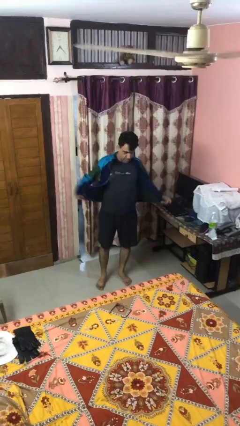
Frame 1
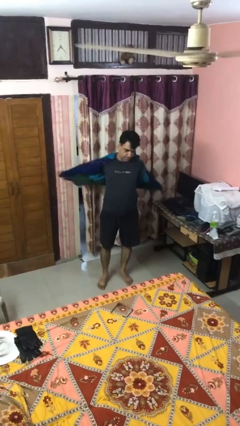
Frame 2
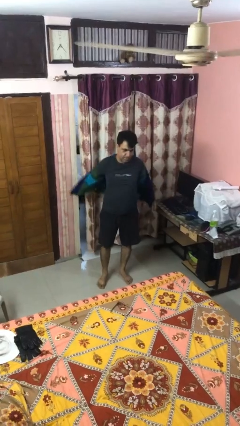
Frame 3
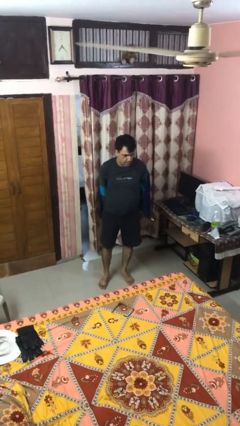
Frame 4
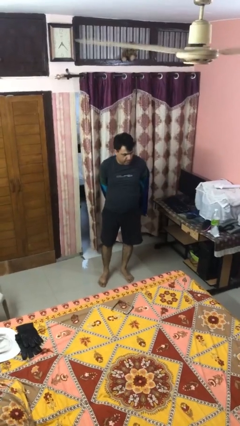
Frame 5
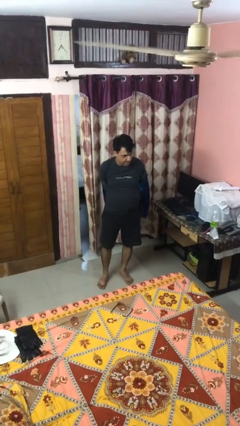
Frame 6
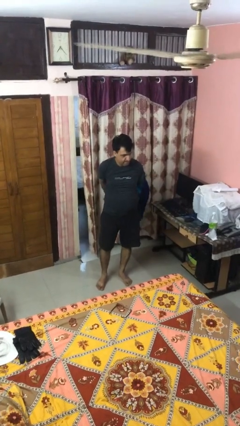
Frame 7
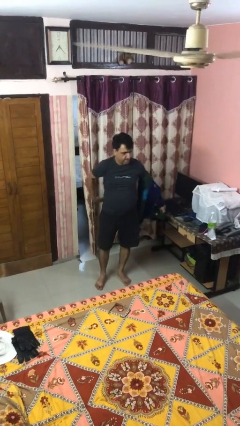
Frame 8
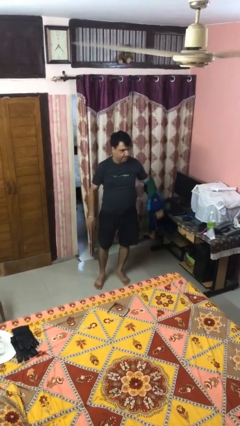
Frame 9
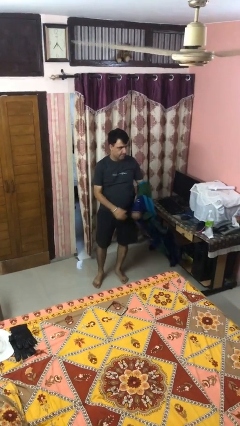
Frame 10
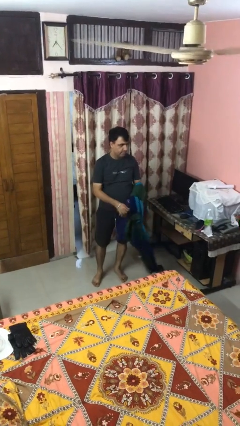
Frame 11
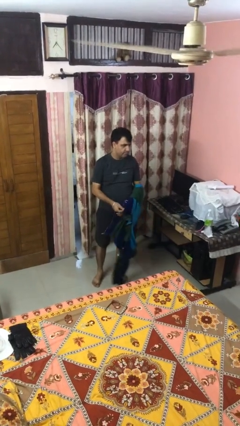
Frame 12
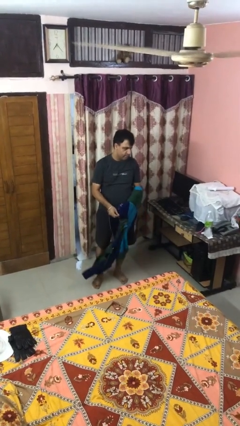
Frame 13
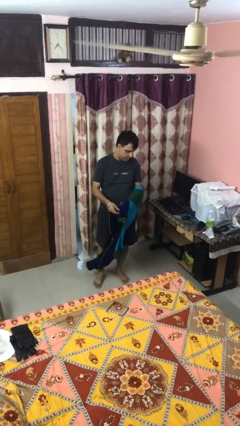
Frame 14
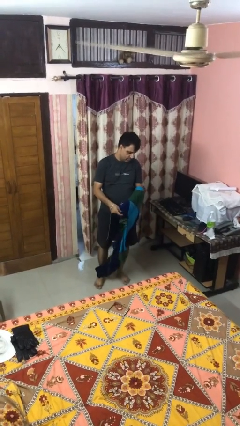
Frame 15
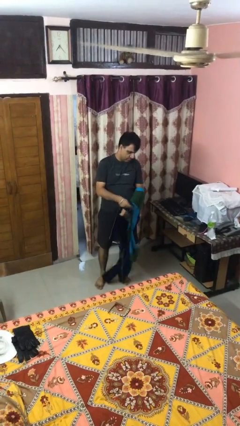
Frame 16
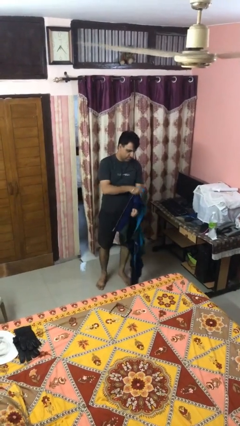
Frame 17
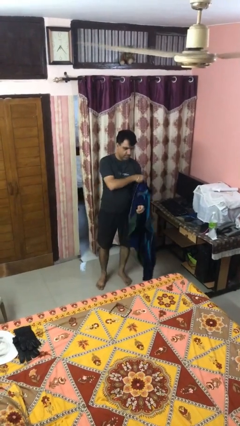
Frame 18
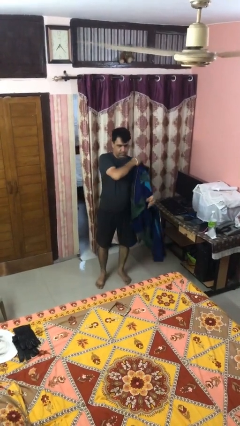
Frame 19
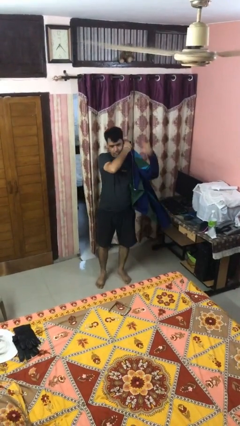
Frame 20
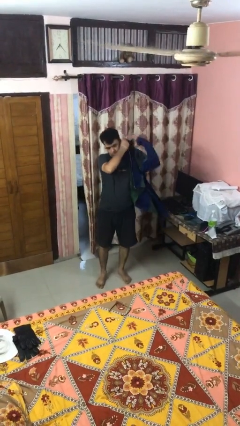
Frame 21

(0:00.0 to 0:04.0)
person takes off jacket

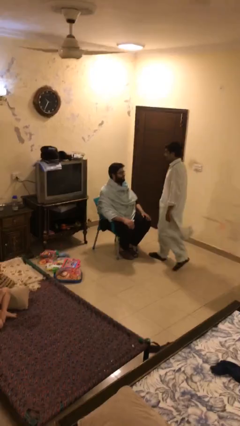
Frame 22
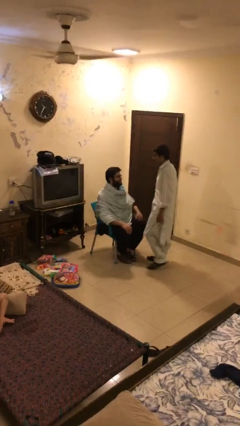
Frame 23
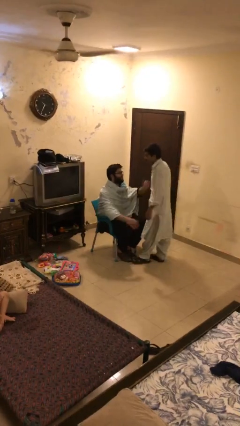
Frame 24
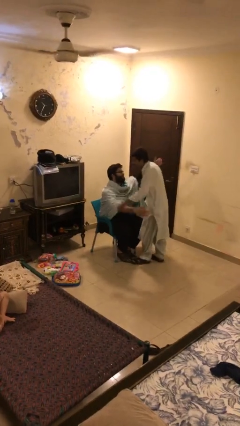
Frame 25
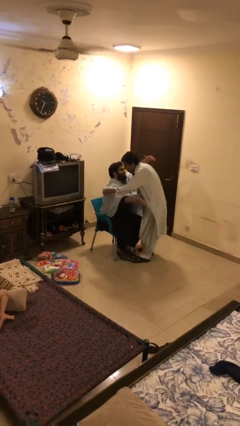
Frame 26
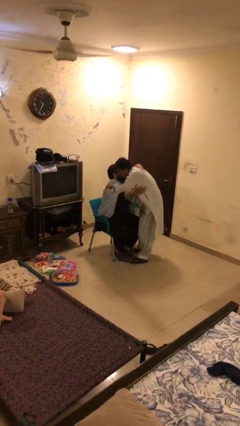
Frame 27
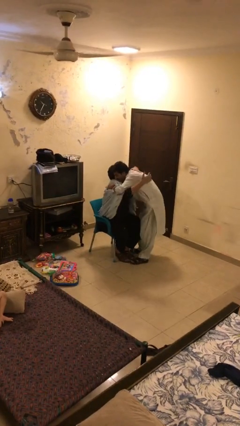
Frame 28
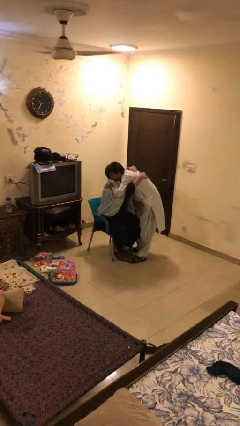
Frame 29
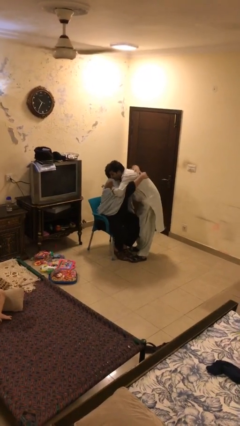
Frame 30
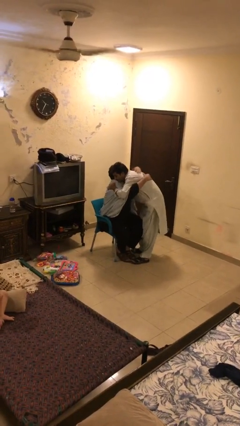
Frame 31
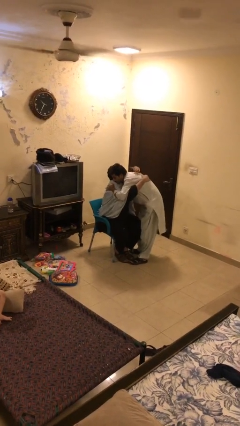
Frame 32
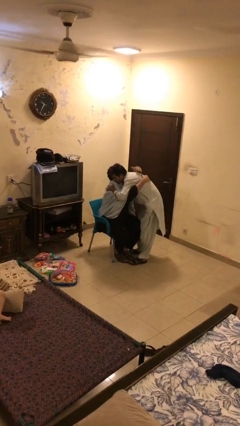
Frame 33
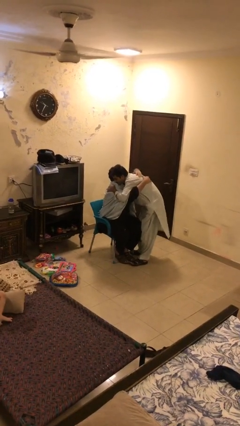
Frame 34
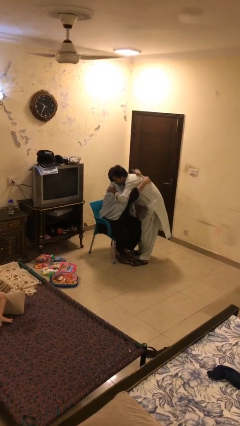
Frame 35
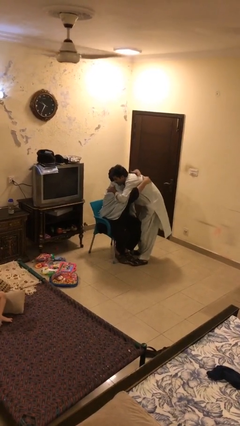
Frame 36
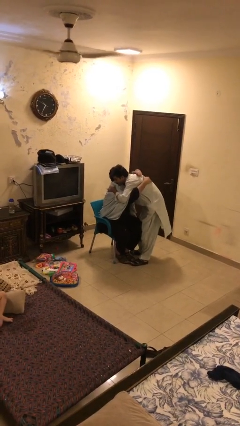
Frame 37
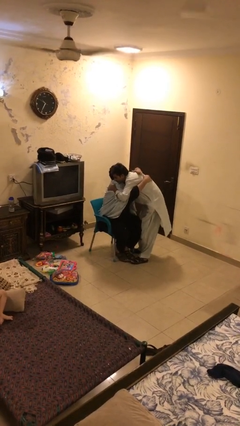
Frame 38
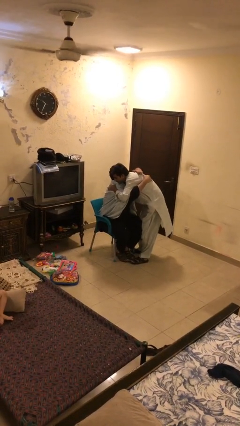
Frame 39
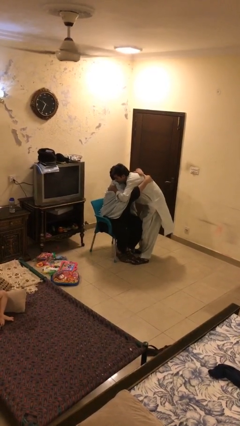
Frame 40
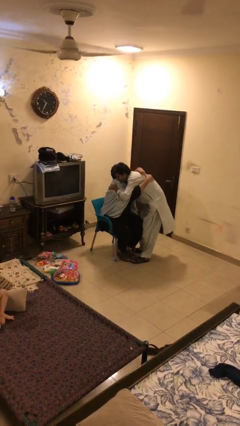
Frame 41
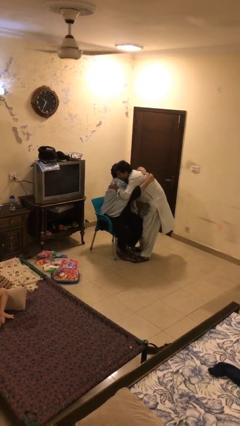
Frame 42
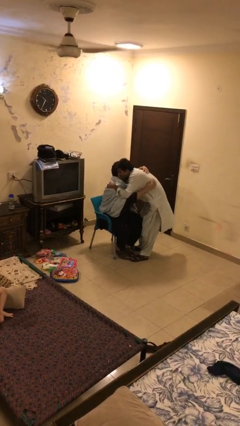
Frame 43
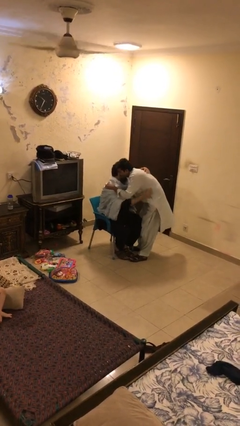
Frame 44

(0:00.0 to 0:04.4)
person embraces person

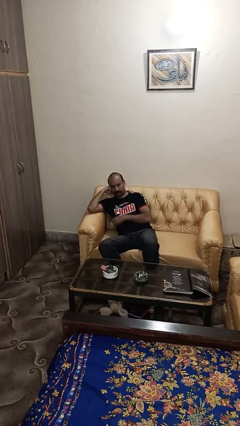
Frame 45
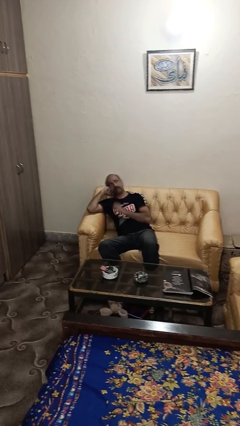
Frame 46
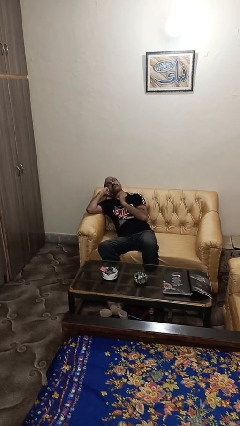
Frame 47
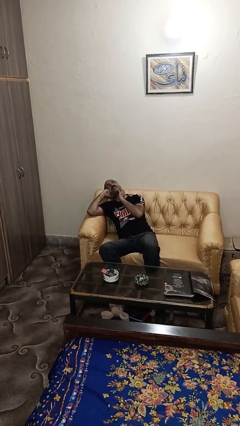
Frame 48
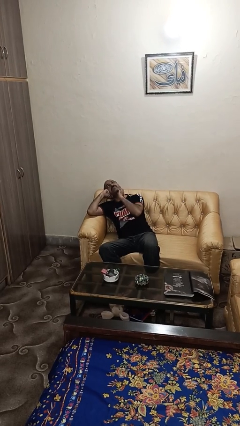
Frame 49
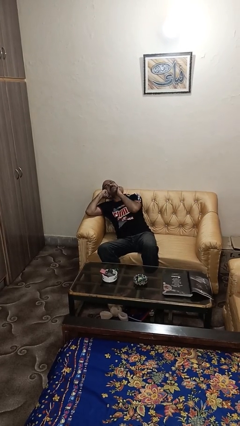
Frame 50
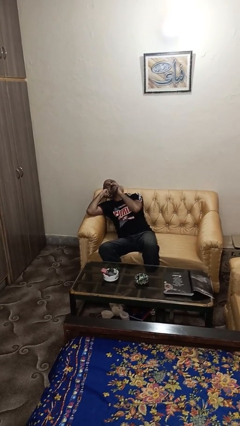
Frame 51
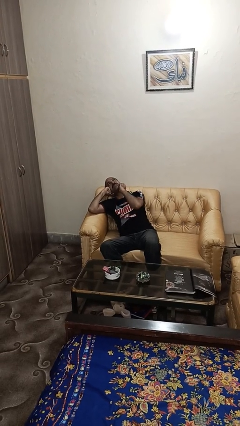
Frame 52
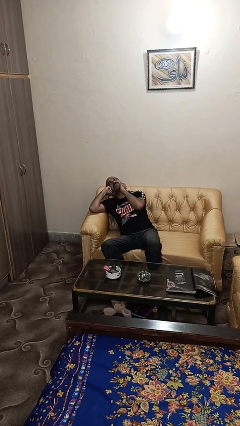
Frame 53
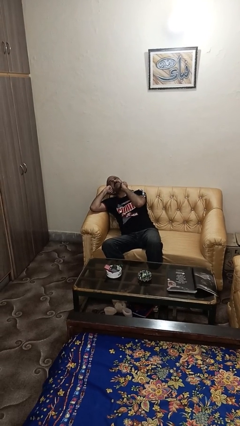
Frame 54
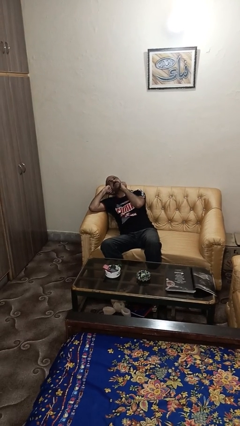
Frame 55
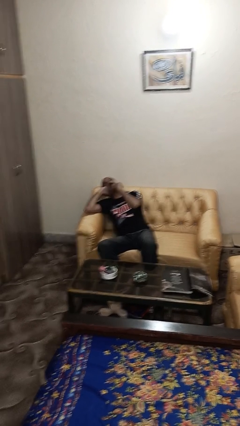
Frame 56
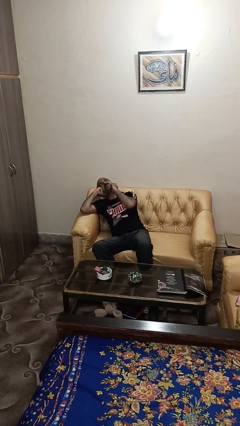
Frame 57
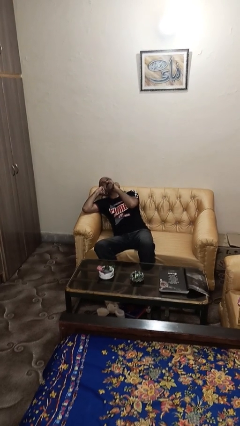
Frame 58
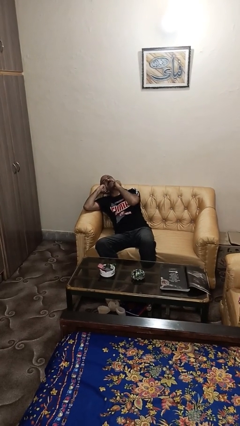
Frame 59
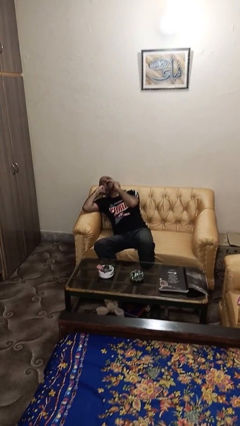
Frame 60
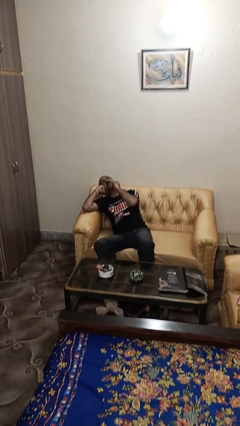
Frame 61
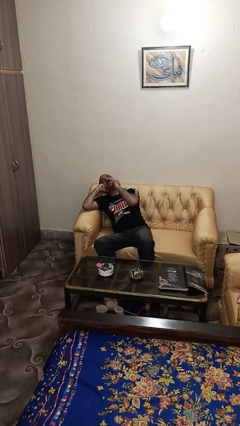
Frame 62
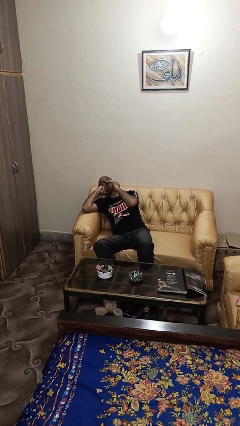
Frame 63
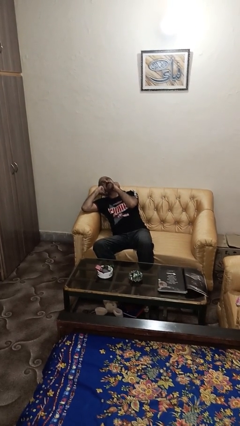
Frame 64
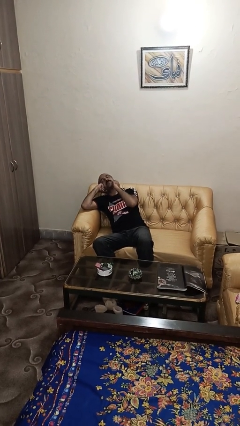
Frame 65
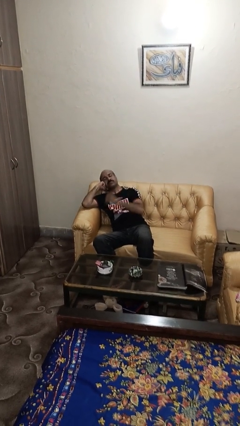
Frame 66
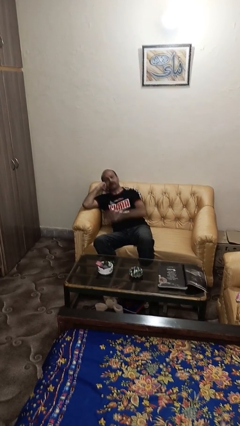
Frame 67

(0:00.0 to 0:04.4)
person strokes chin

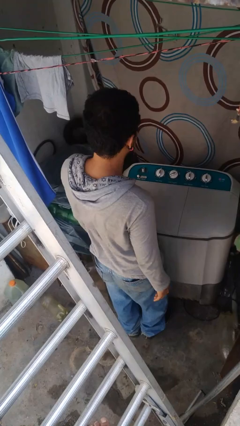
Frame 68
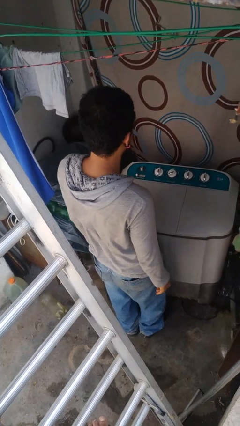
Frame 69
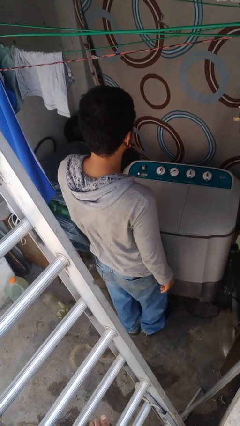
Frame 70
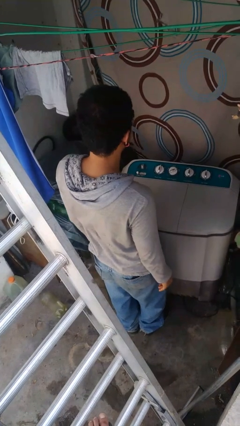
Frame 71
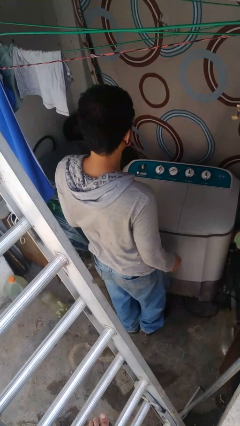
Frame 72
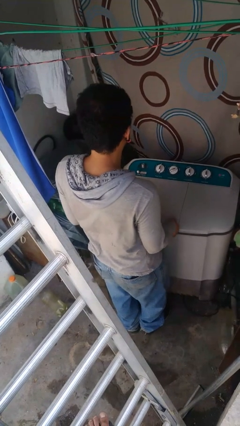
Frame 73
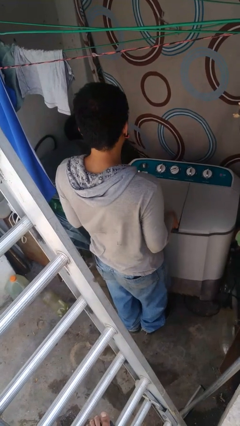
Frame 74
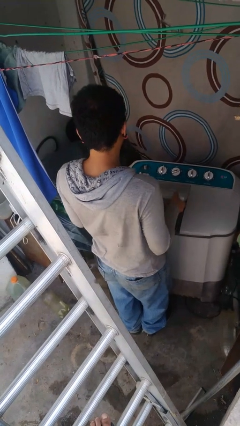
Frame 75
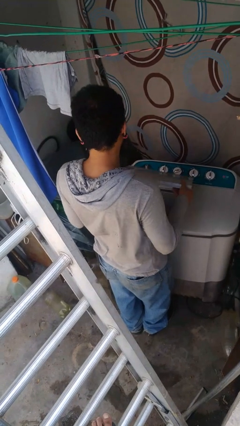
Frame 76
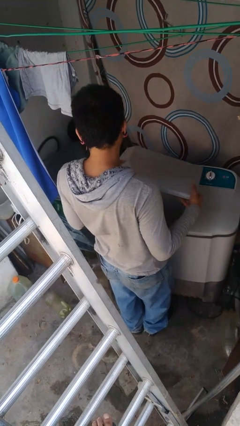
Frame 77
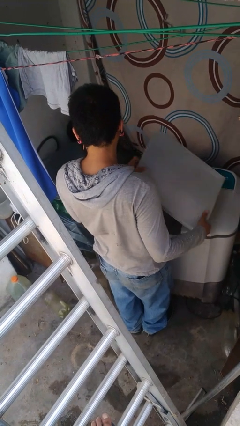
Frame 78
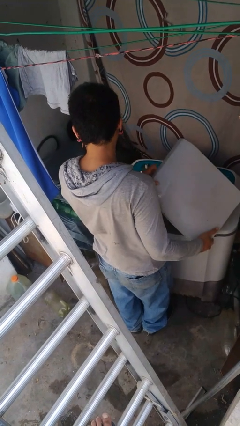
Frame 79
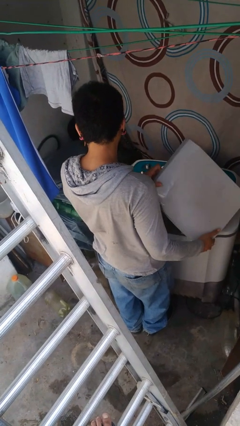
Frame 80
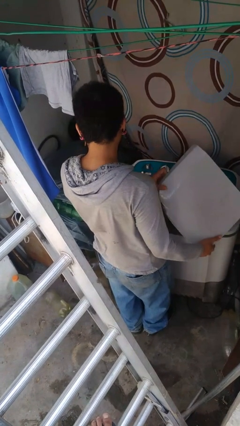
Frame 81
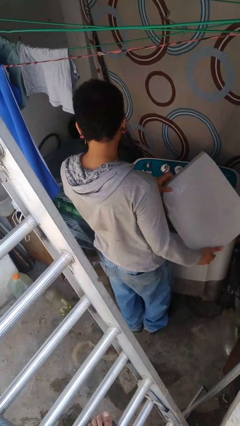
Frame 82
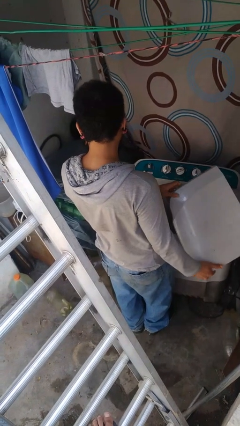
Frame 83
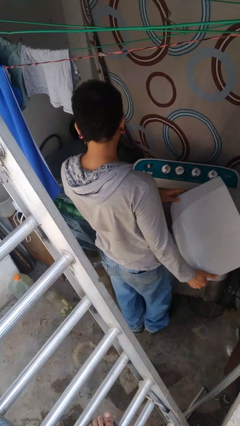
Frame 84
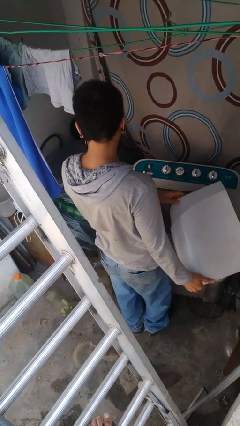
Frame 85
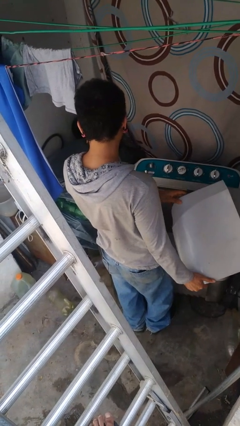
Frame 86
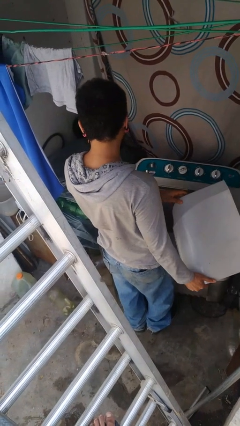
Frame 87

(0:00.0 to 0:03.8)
person opens clothes washer

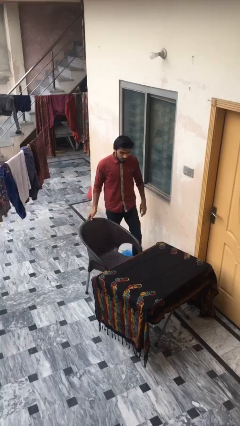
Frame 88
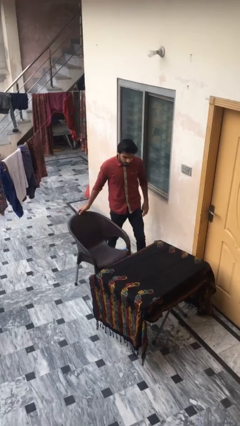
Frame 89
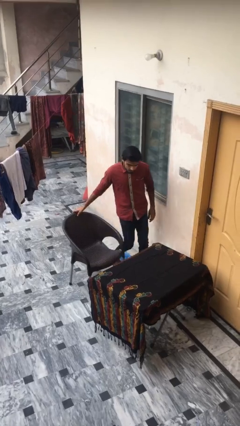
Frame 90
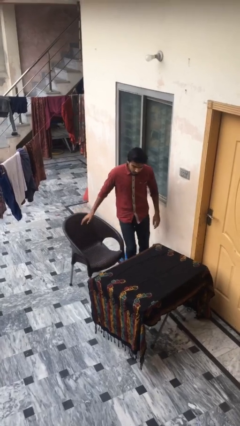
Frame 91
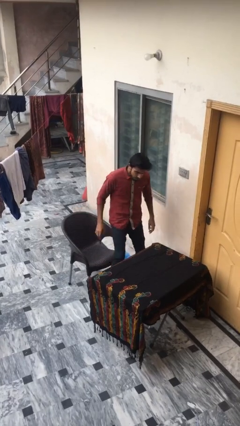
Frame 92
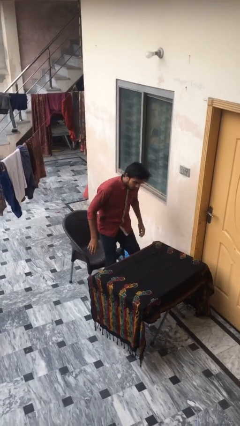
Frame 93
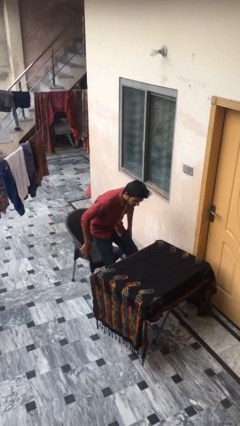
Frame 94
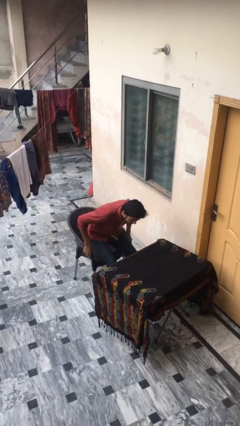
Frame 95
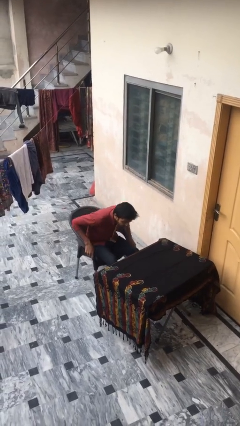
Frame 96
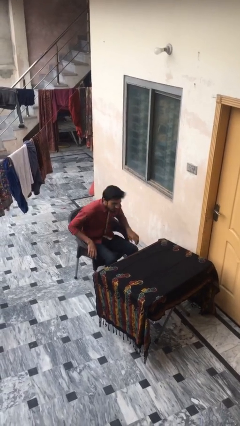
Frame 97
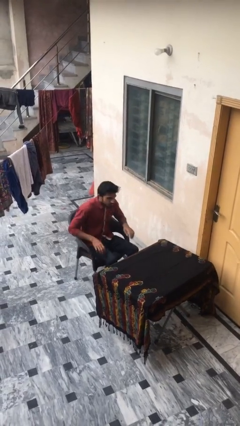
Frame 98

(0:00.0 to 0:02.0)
person sits down
